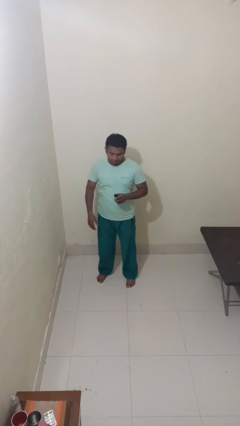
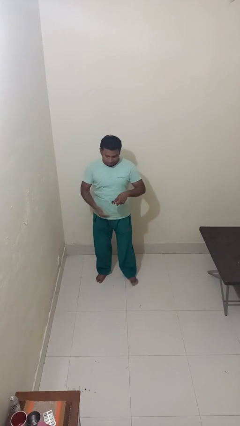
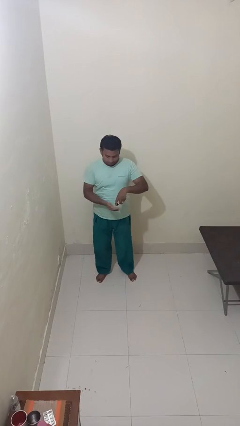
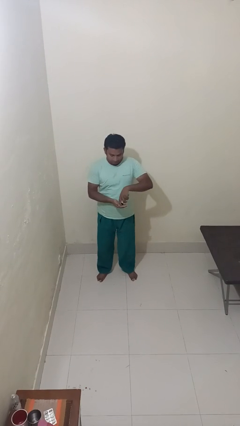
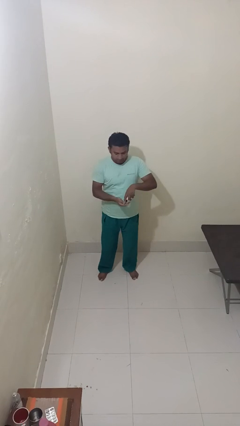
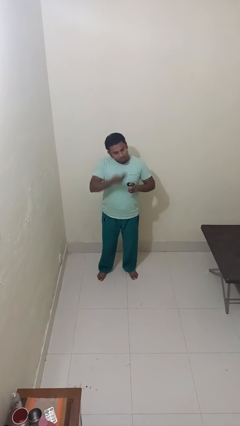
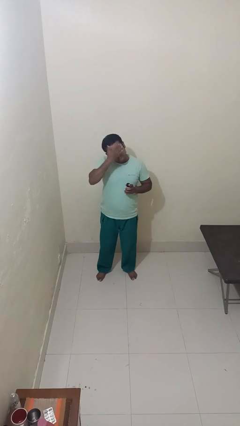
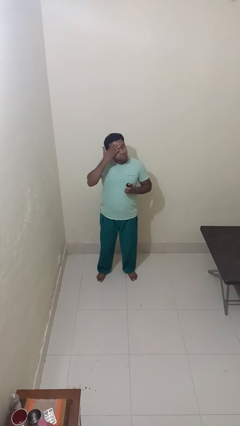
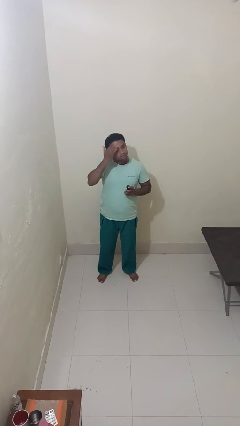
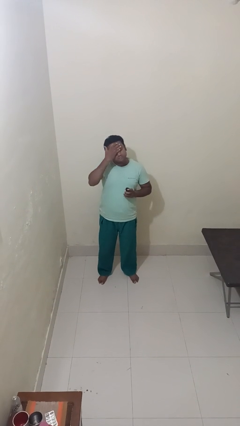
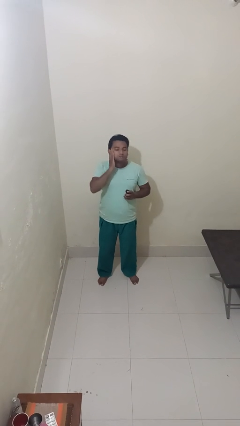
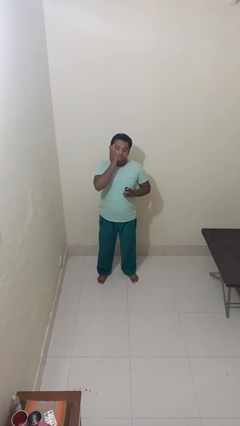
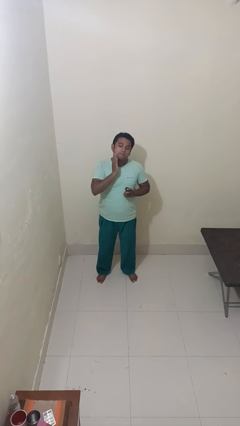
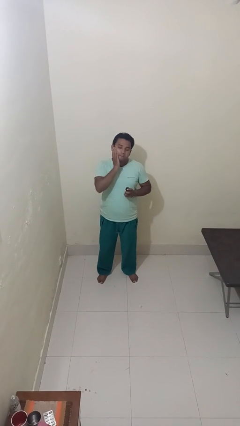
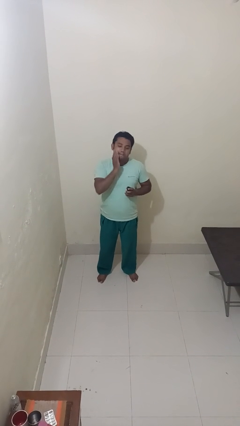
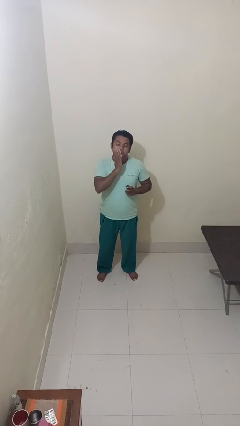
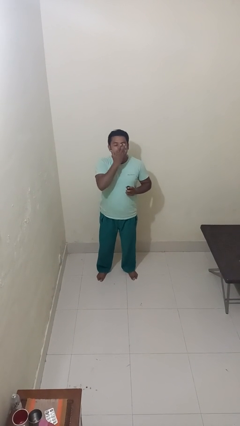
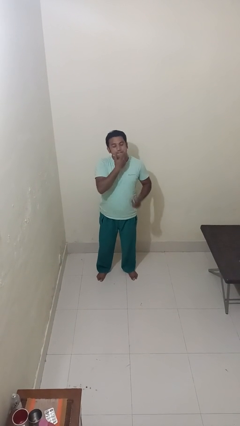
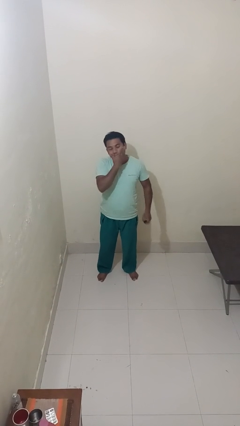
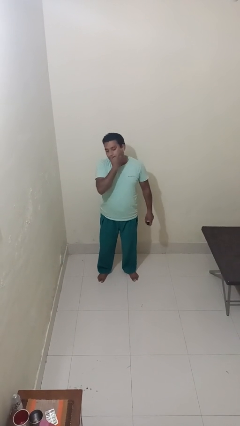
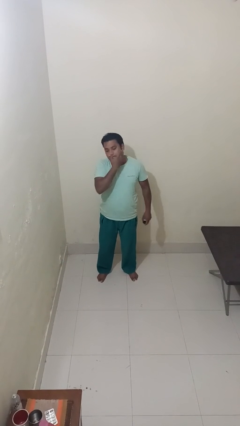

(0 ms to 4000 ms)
person applies facial moisturizer

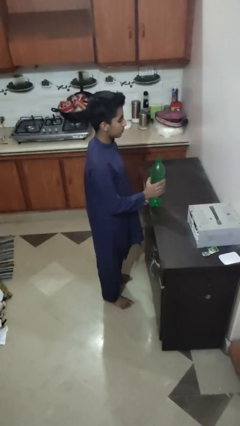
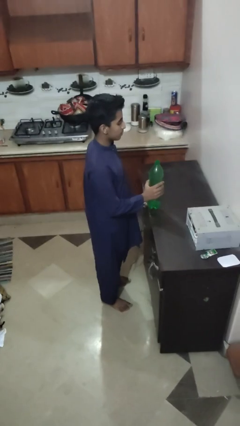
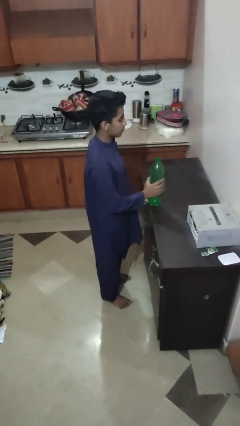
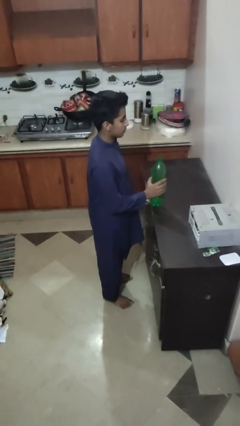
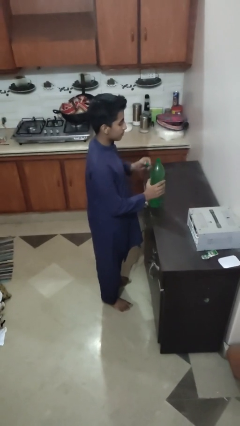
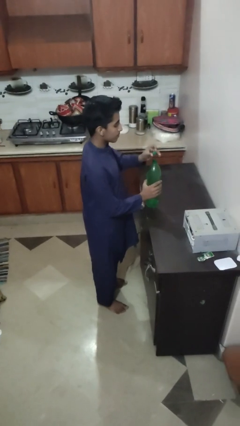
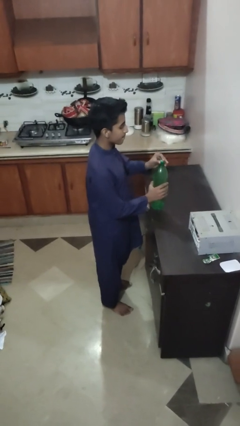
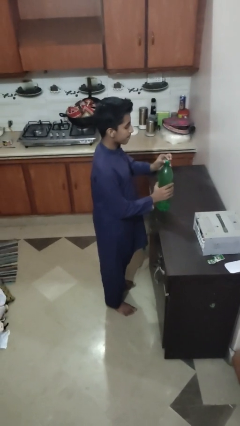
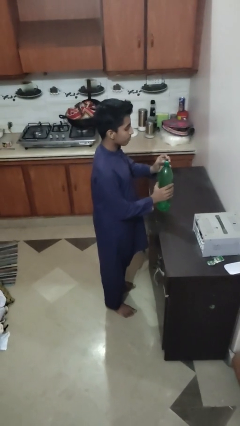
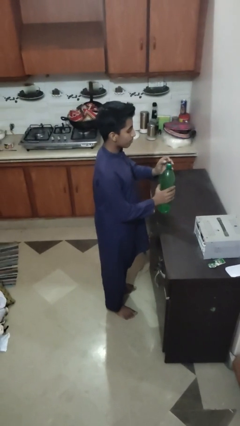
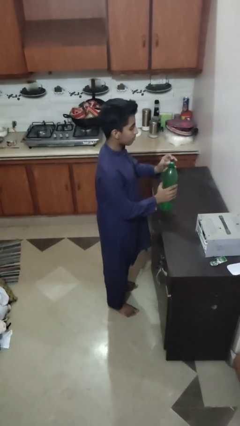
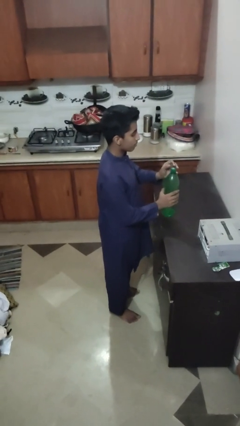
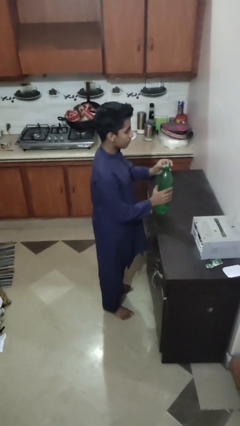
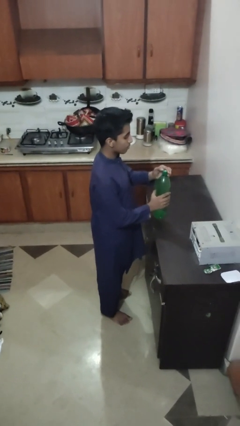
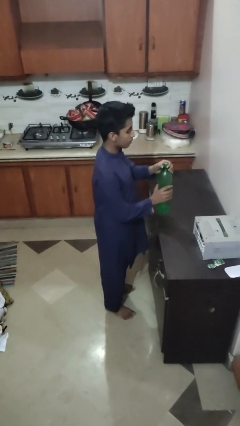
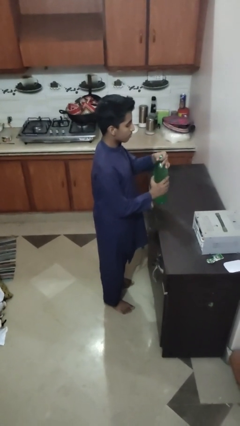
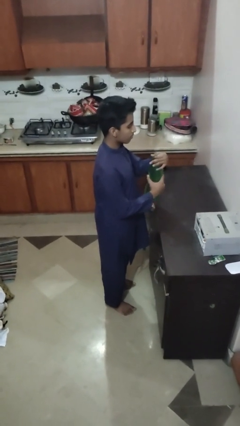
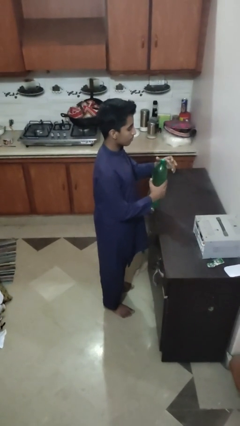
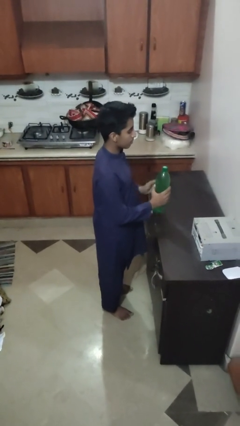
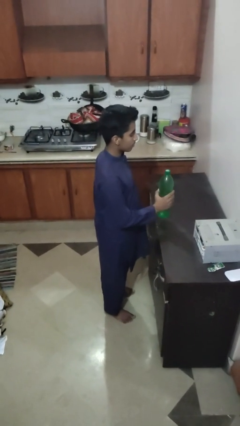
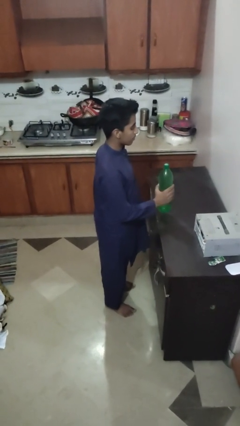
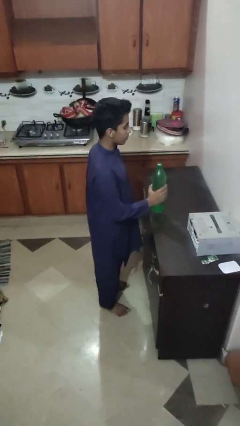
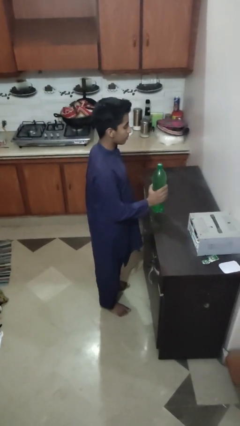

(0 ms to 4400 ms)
person screws lid to bottle

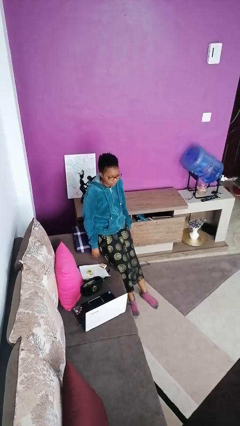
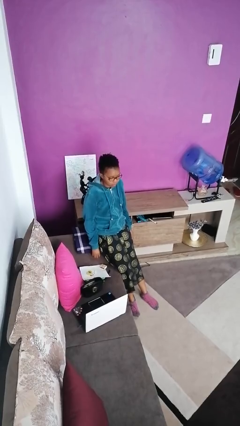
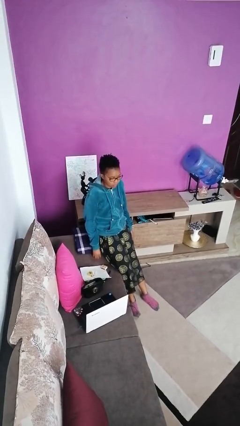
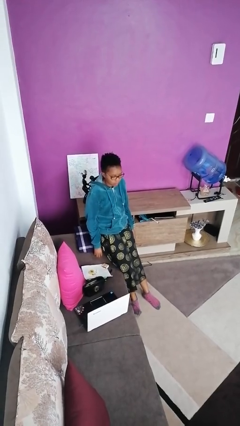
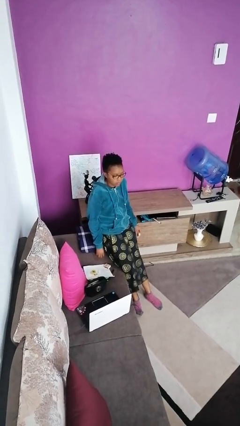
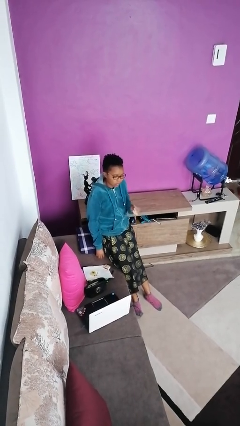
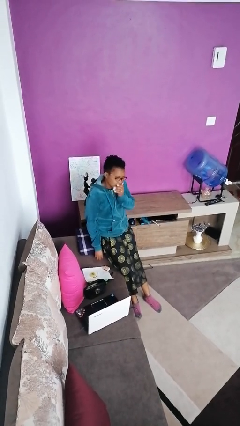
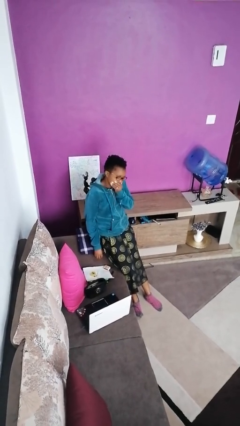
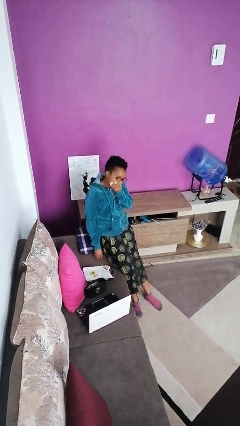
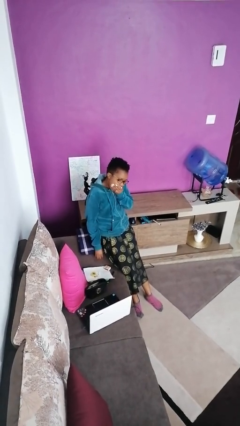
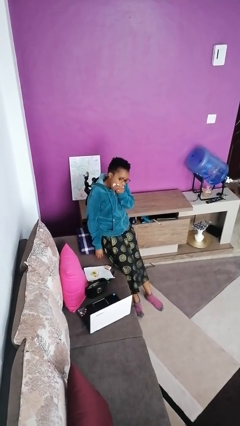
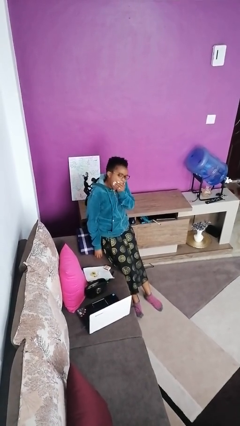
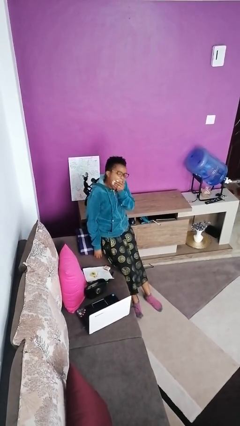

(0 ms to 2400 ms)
person opens cabinet

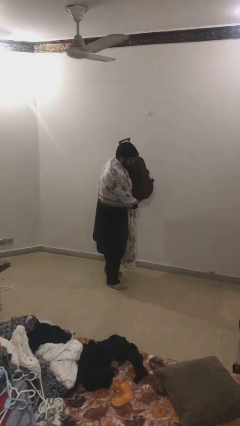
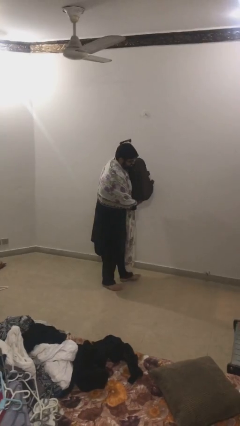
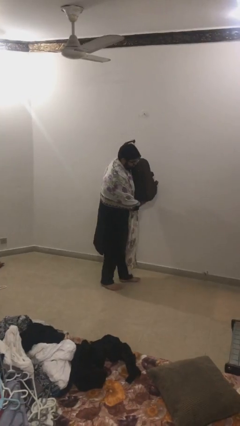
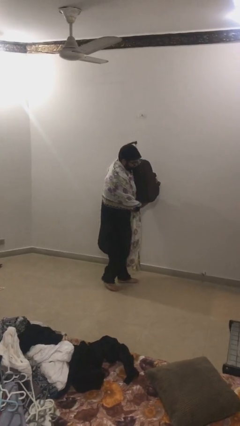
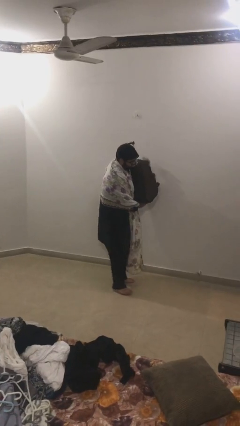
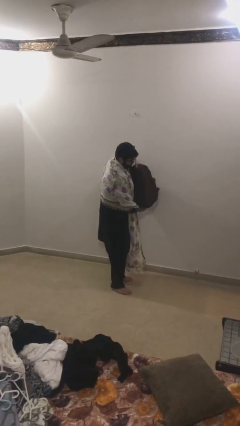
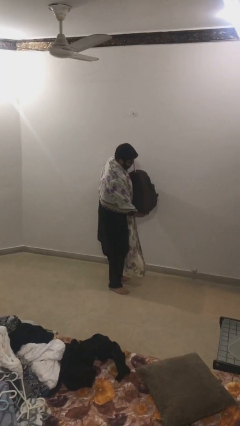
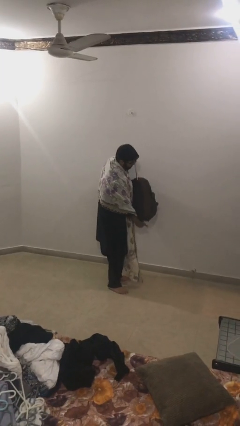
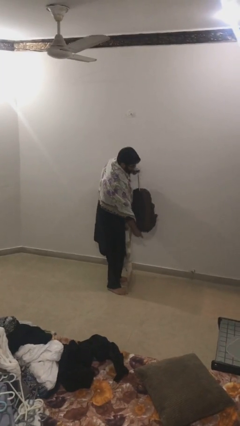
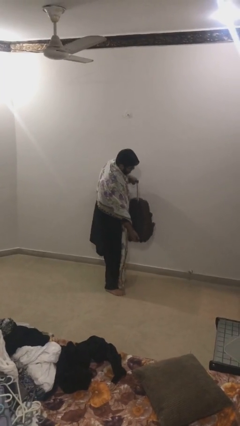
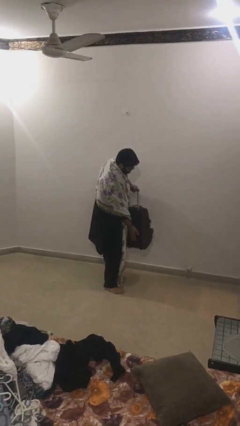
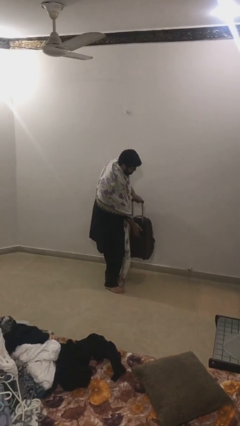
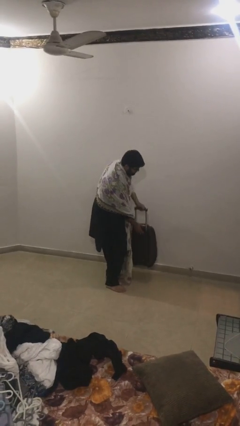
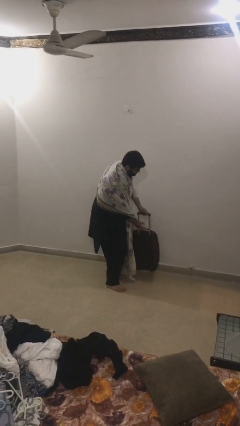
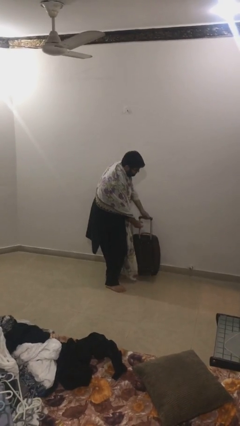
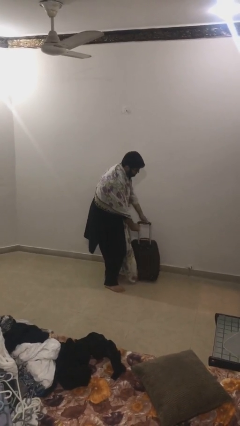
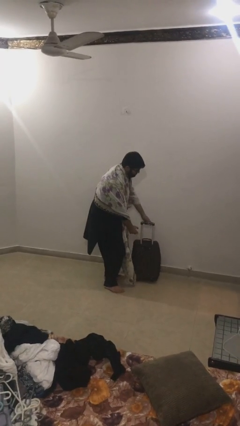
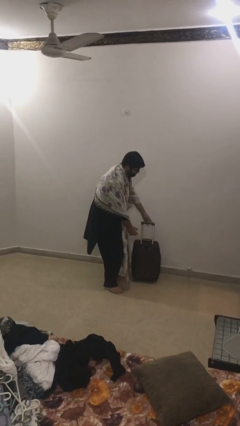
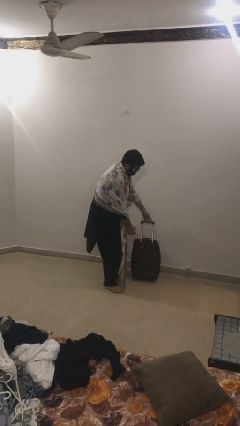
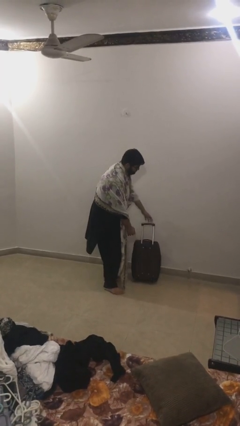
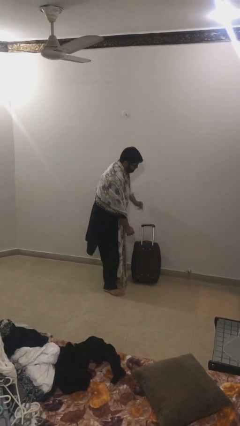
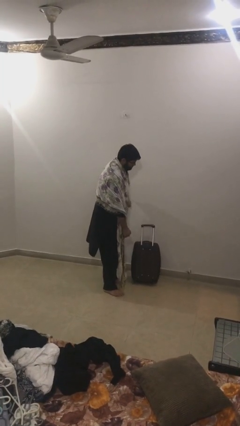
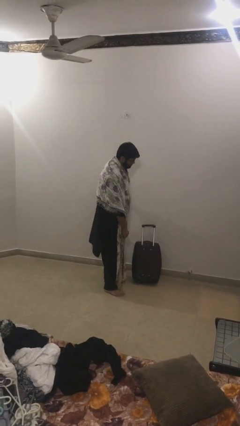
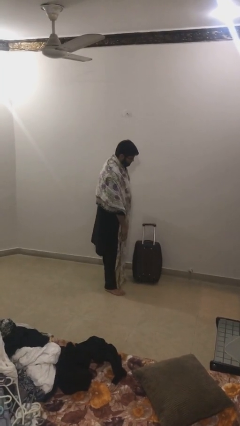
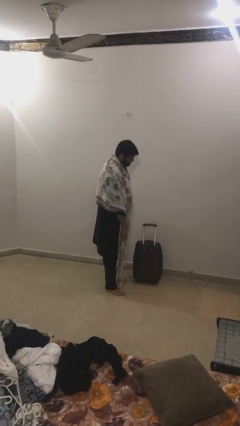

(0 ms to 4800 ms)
person puts down object on floor

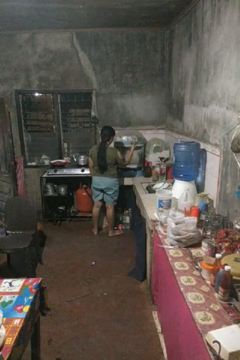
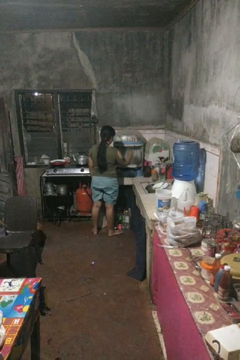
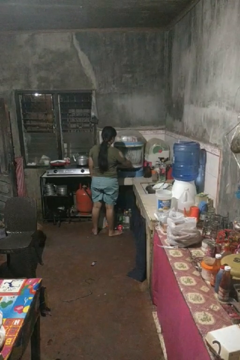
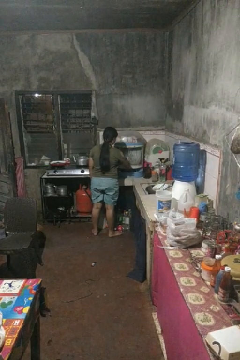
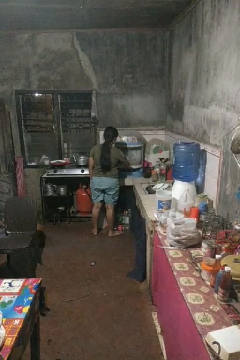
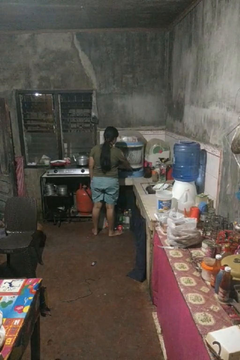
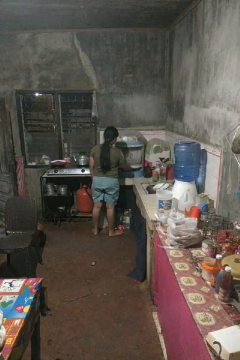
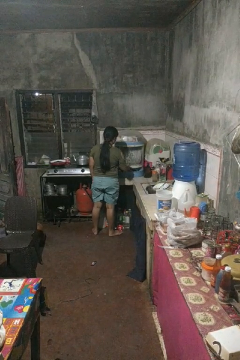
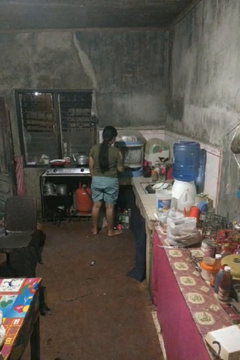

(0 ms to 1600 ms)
person puts object into kitchen drawer

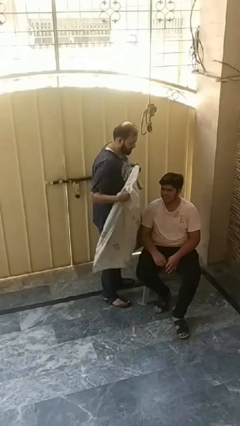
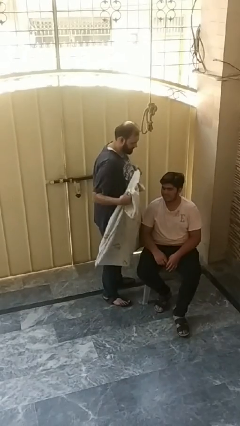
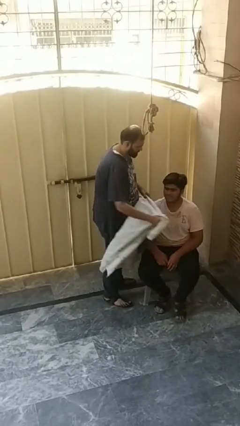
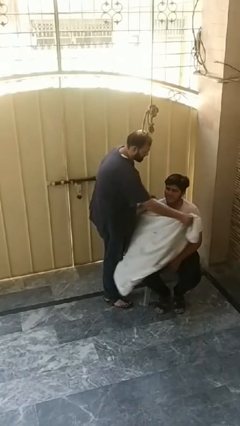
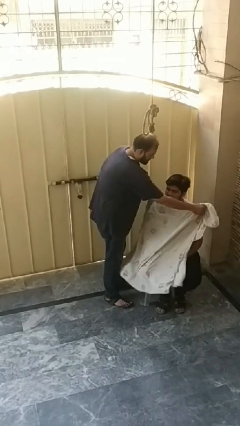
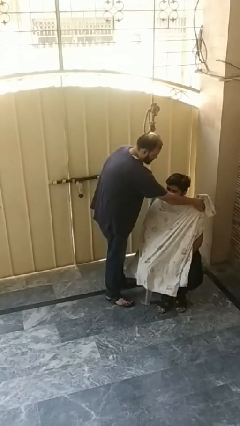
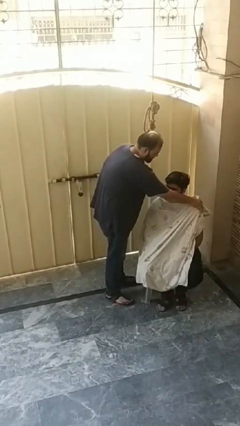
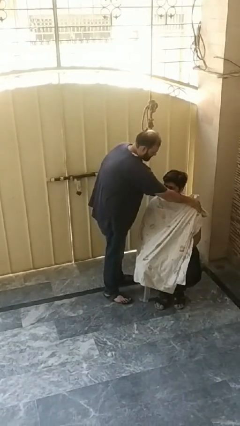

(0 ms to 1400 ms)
person covers friend with blanket
